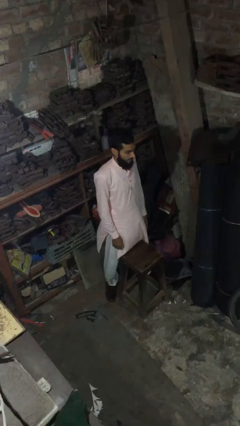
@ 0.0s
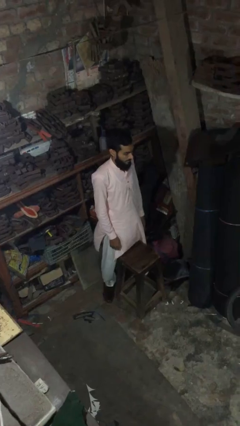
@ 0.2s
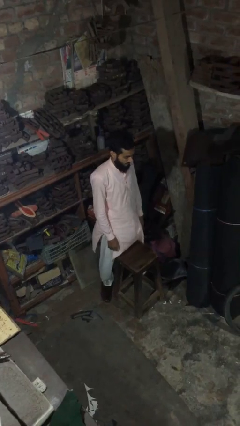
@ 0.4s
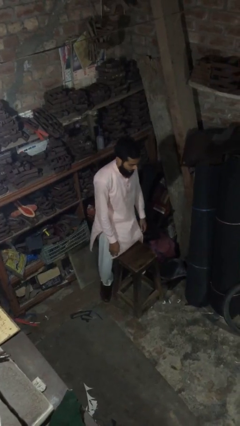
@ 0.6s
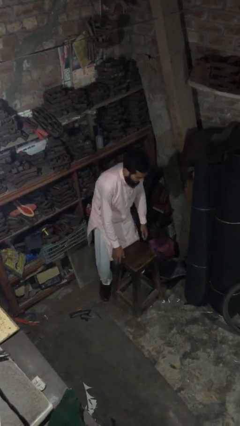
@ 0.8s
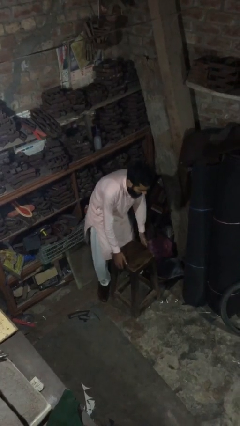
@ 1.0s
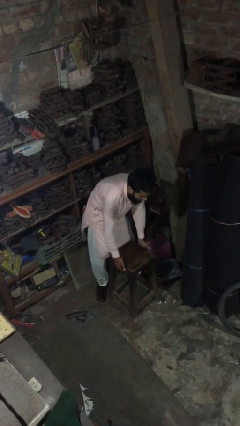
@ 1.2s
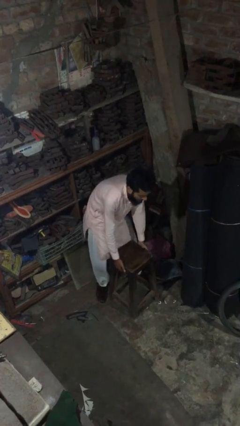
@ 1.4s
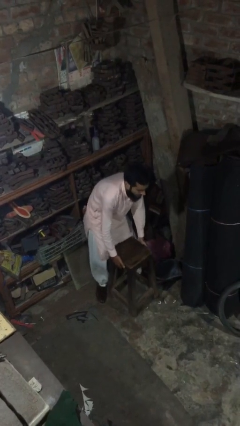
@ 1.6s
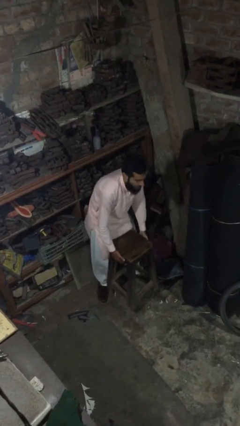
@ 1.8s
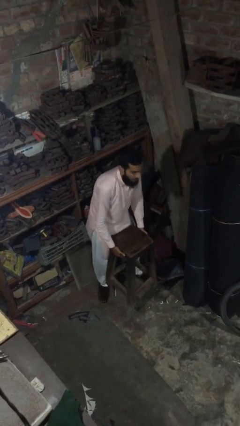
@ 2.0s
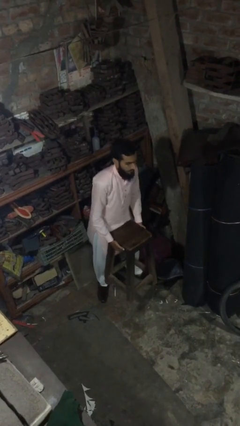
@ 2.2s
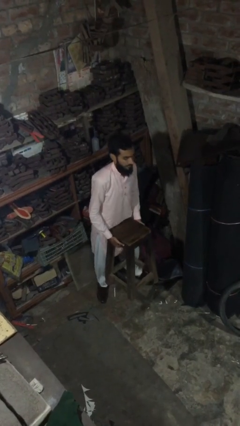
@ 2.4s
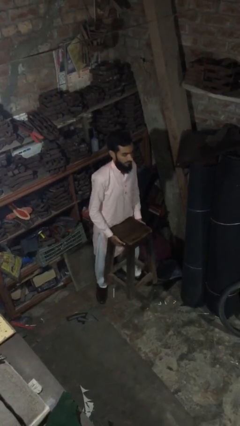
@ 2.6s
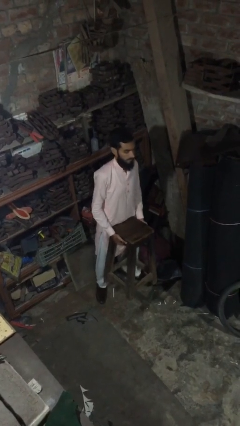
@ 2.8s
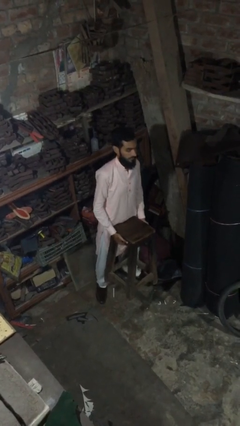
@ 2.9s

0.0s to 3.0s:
person picks up object from floor

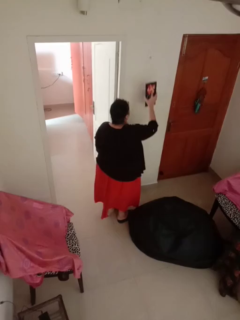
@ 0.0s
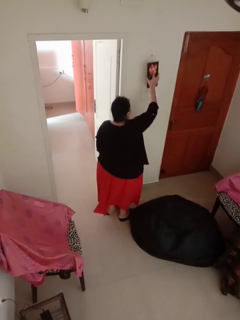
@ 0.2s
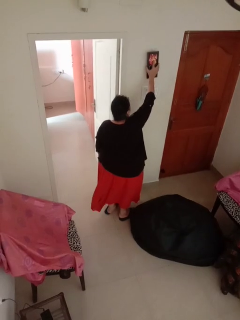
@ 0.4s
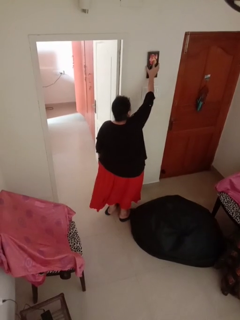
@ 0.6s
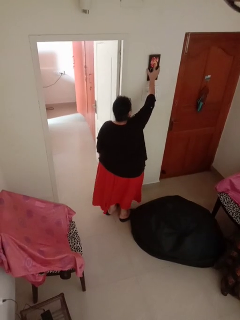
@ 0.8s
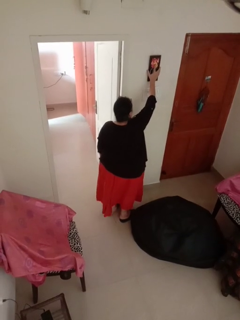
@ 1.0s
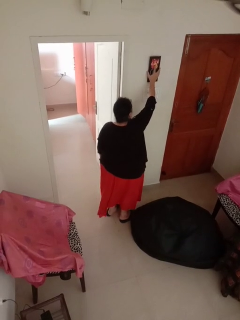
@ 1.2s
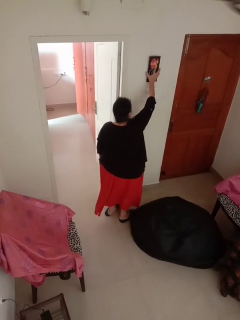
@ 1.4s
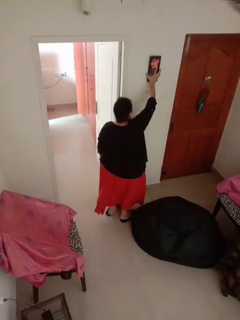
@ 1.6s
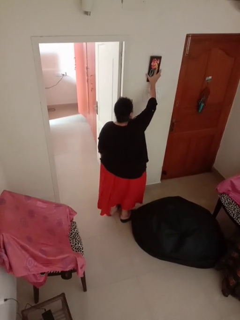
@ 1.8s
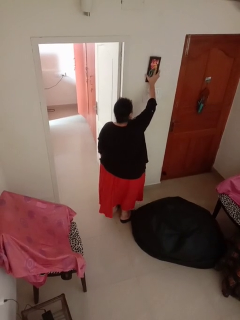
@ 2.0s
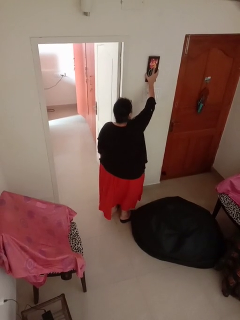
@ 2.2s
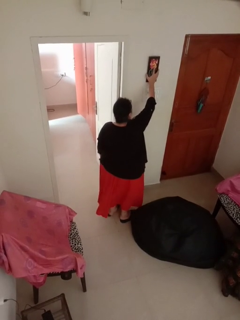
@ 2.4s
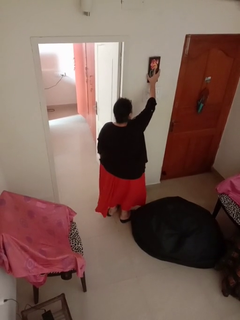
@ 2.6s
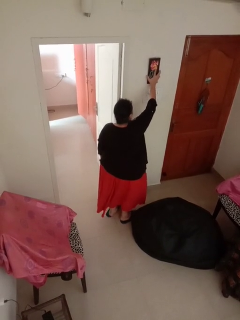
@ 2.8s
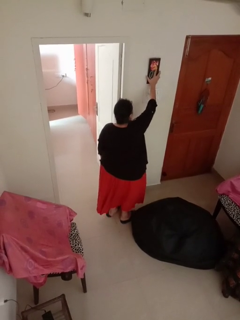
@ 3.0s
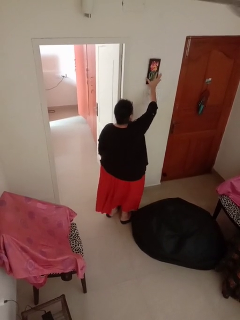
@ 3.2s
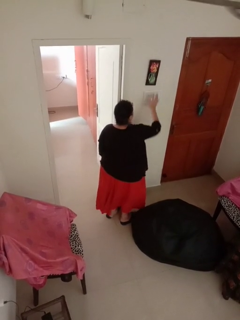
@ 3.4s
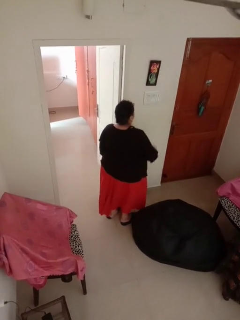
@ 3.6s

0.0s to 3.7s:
person puts up picture frame

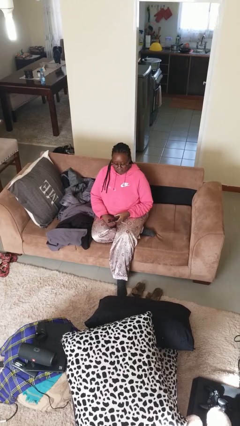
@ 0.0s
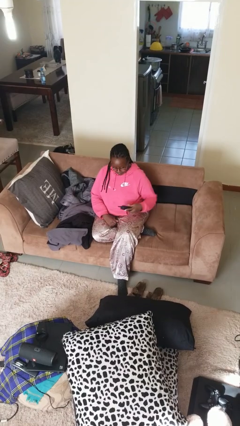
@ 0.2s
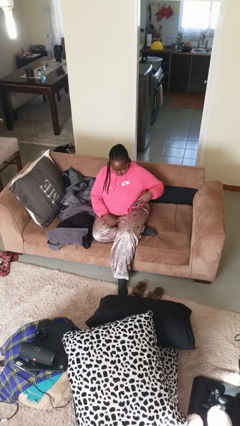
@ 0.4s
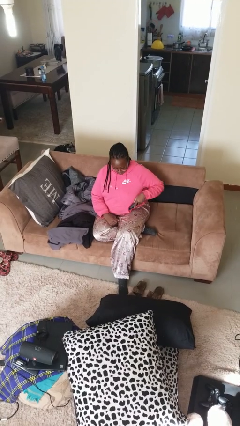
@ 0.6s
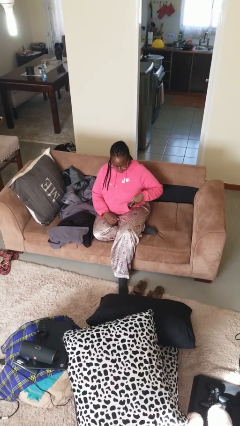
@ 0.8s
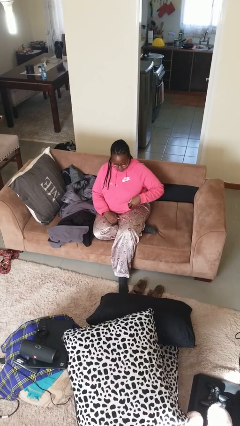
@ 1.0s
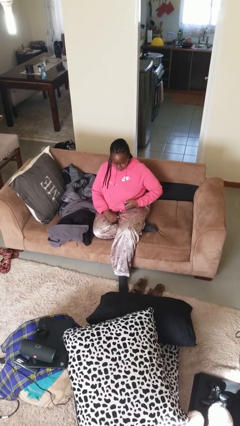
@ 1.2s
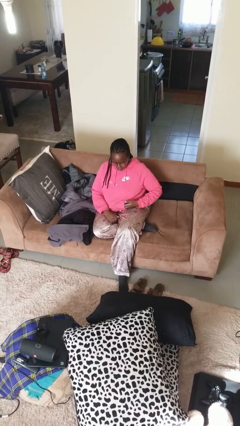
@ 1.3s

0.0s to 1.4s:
person puts phone into pocket

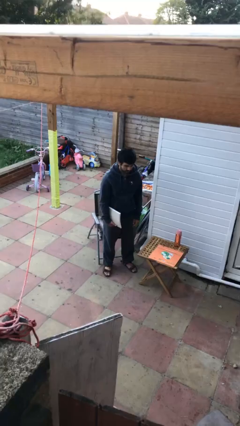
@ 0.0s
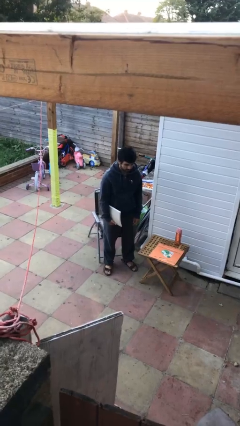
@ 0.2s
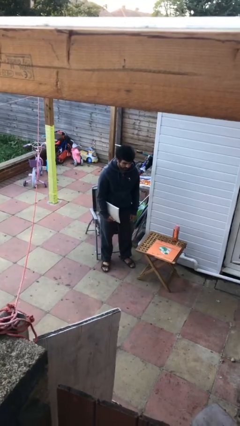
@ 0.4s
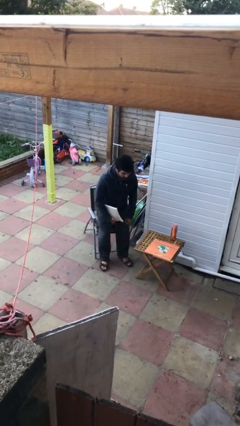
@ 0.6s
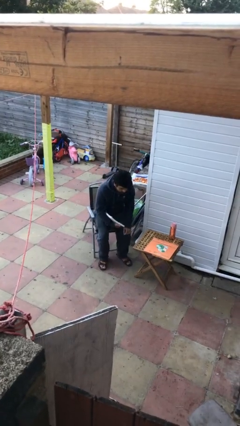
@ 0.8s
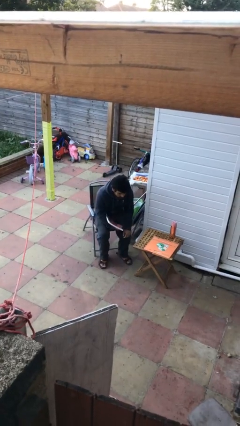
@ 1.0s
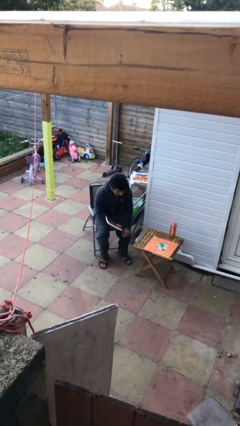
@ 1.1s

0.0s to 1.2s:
person sits down

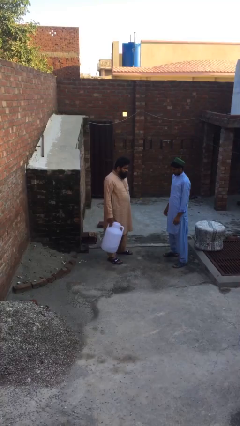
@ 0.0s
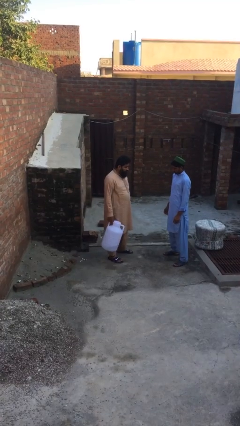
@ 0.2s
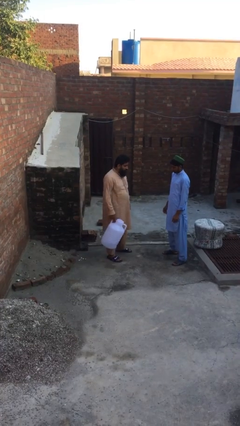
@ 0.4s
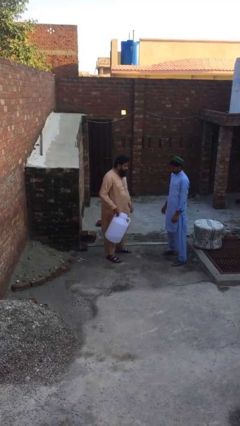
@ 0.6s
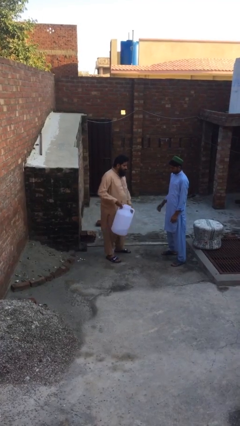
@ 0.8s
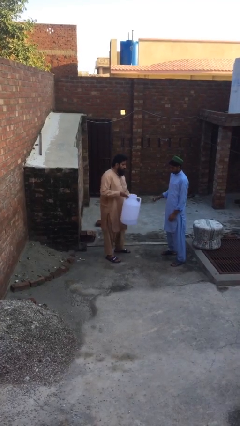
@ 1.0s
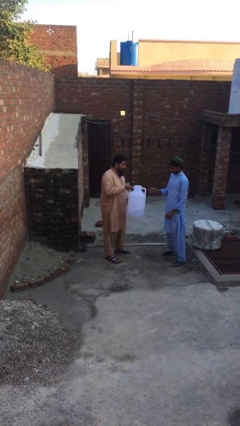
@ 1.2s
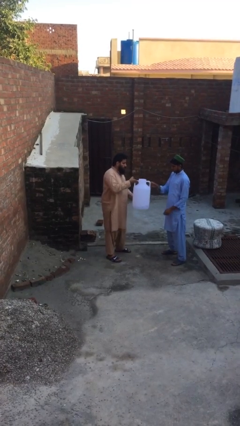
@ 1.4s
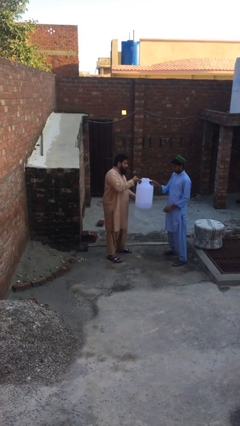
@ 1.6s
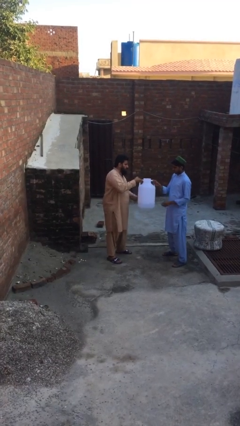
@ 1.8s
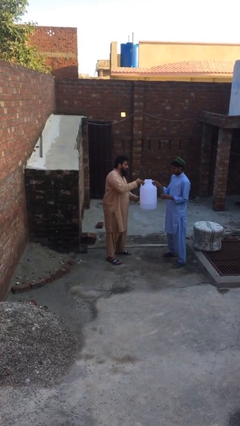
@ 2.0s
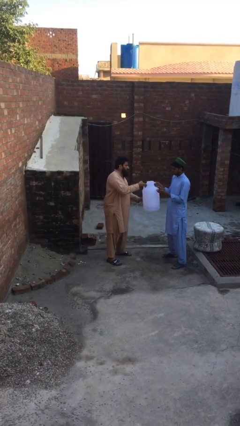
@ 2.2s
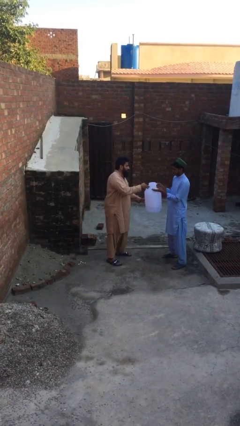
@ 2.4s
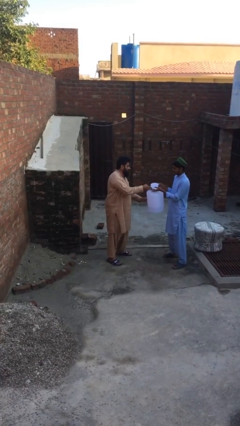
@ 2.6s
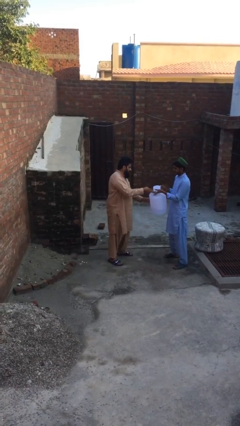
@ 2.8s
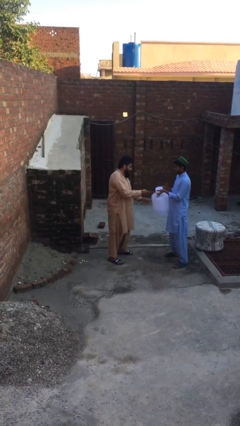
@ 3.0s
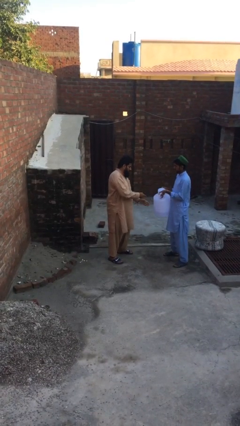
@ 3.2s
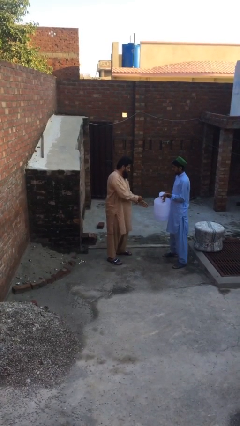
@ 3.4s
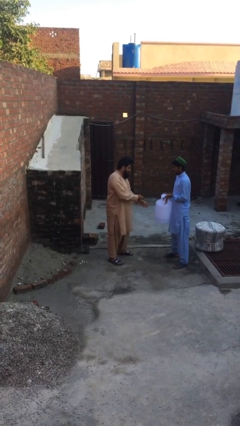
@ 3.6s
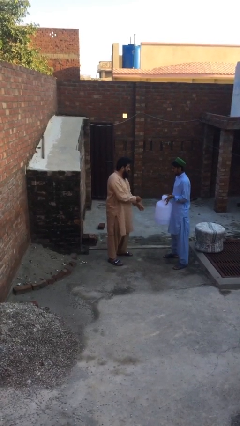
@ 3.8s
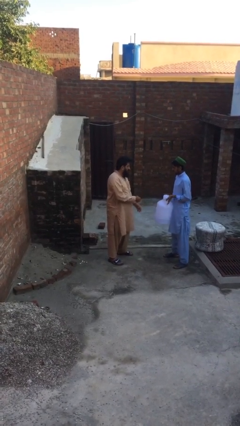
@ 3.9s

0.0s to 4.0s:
person transfers object to person

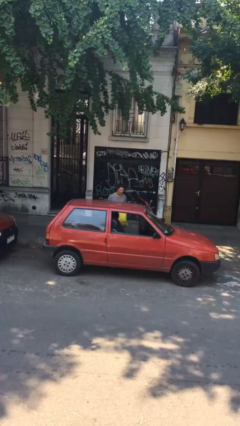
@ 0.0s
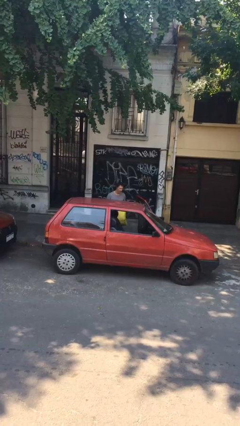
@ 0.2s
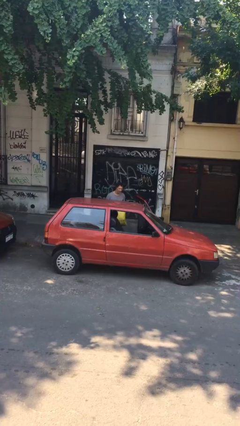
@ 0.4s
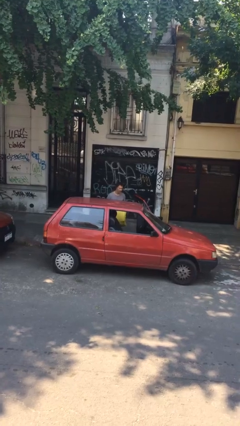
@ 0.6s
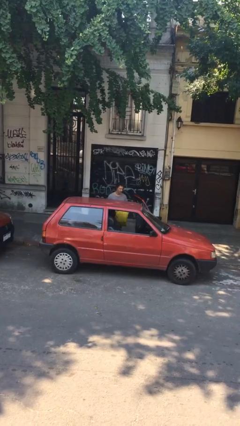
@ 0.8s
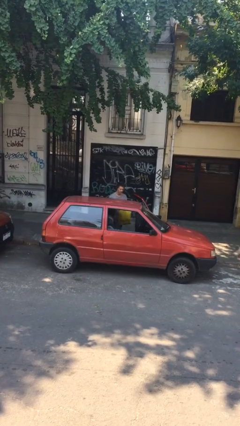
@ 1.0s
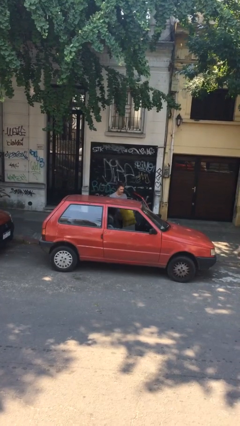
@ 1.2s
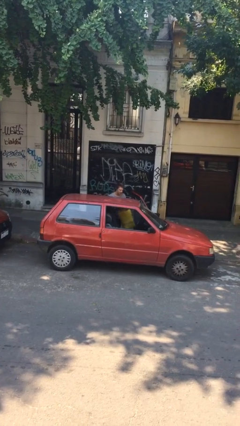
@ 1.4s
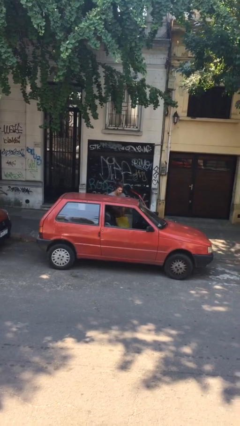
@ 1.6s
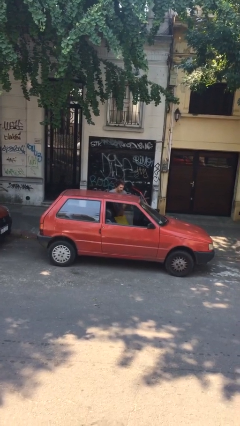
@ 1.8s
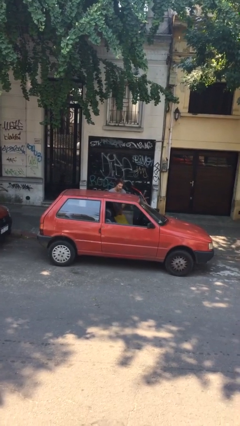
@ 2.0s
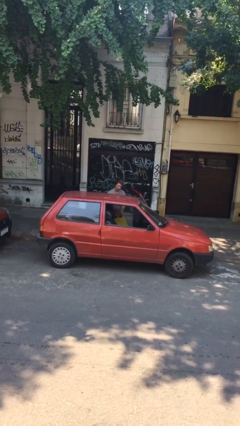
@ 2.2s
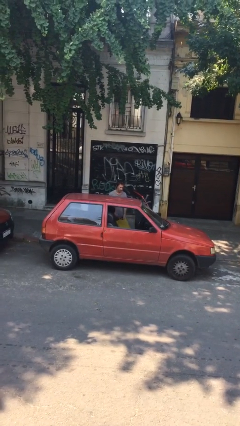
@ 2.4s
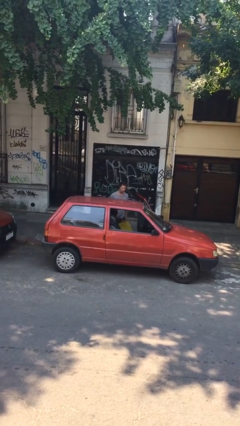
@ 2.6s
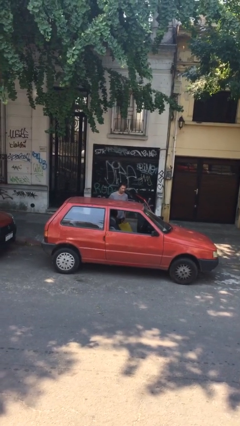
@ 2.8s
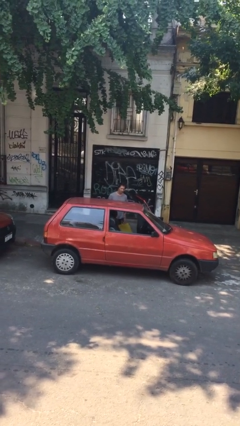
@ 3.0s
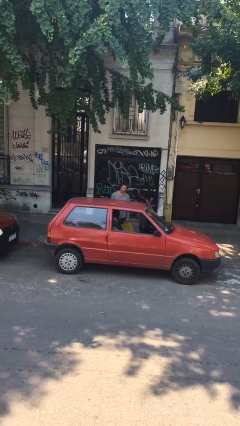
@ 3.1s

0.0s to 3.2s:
person loads car

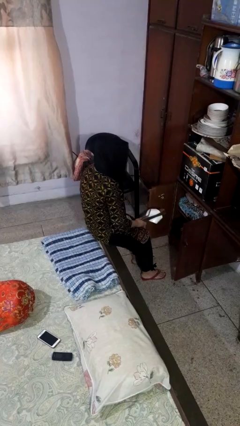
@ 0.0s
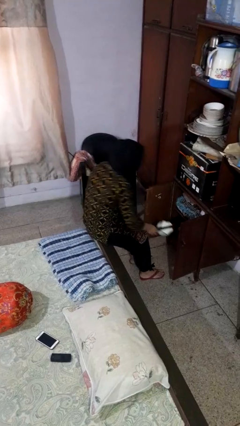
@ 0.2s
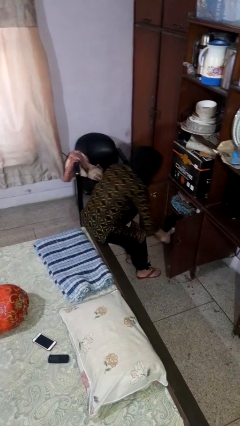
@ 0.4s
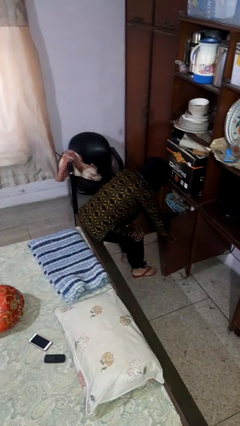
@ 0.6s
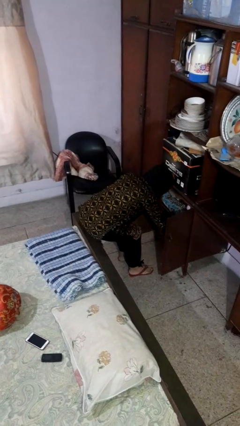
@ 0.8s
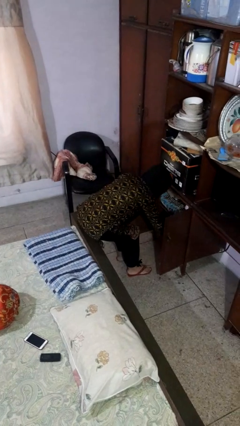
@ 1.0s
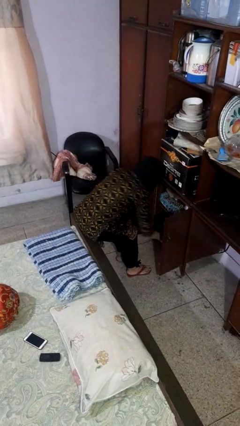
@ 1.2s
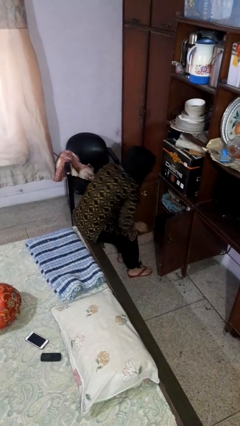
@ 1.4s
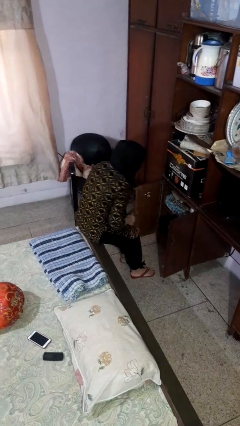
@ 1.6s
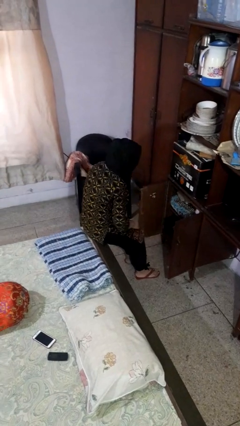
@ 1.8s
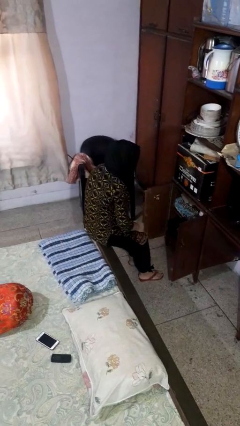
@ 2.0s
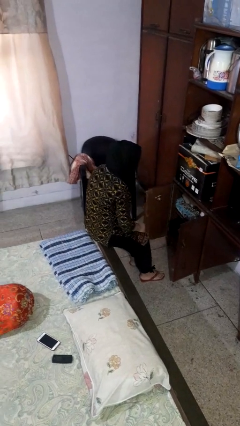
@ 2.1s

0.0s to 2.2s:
person puts object in cabinet
